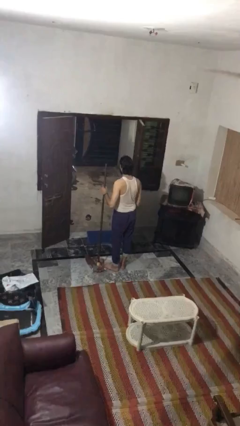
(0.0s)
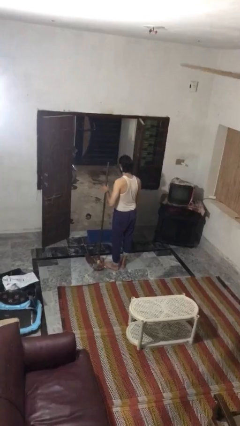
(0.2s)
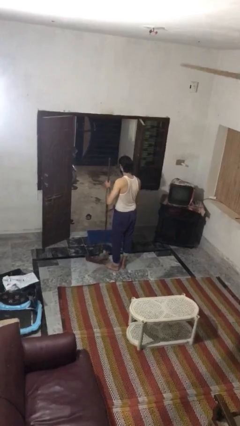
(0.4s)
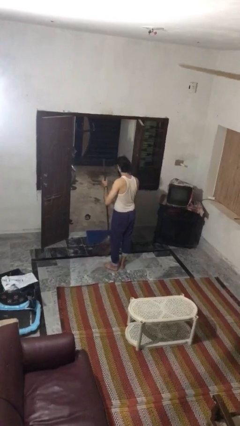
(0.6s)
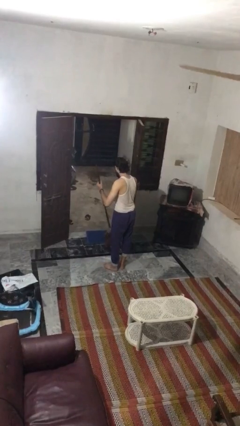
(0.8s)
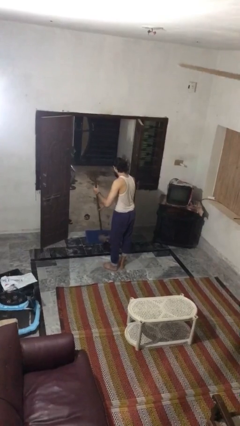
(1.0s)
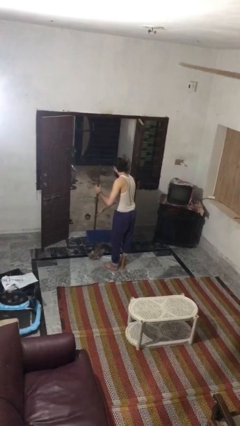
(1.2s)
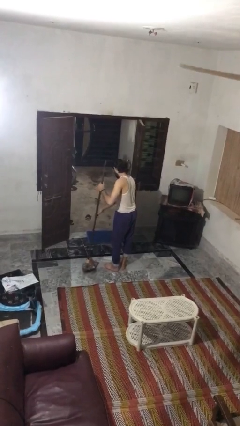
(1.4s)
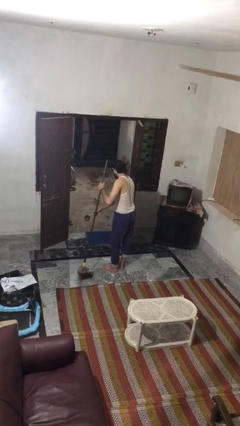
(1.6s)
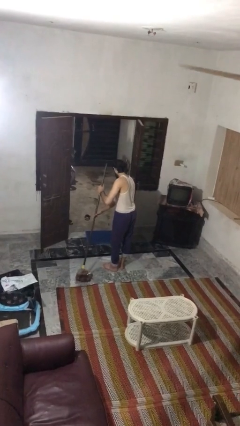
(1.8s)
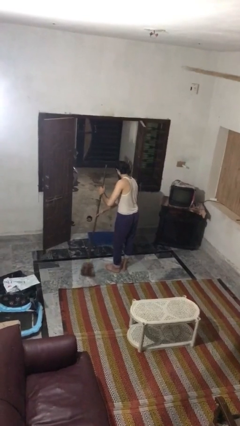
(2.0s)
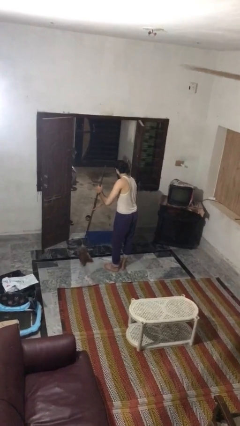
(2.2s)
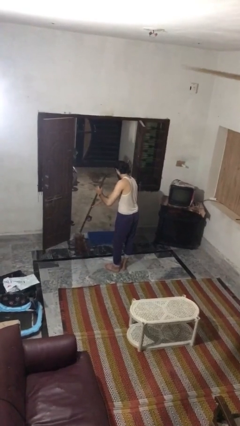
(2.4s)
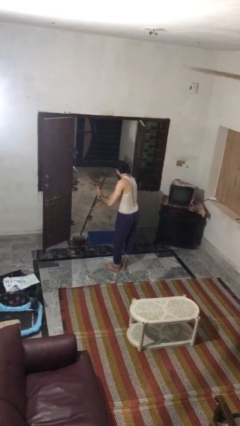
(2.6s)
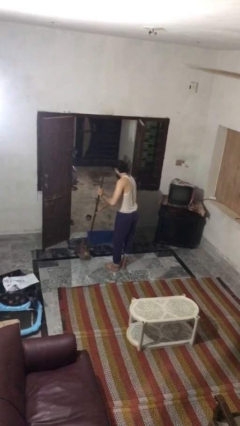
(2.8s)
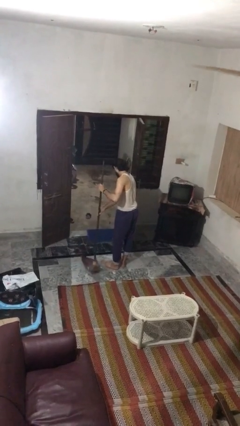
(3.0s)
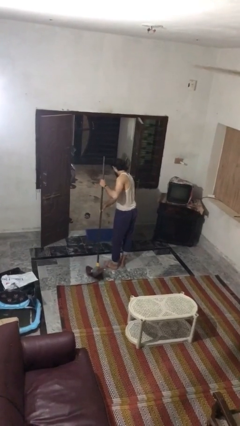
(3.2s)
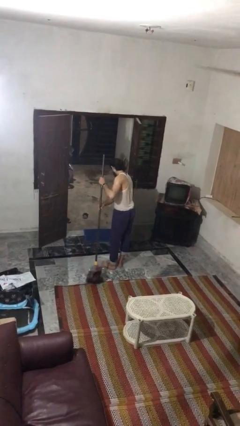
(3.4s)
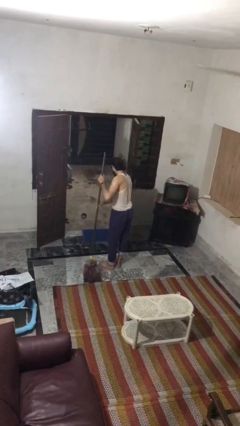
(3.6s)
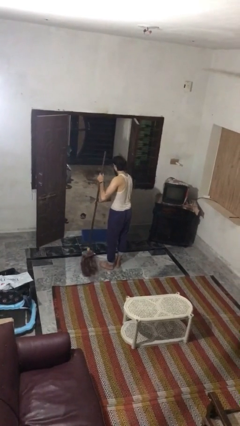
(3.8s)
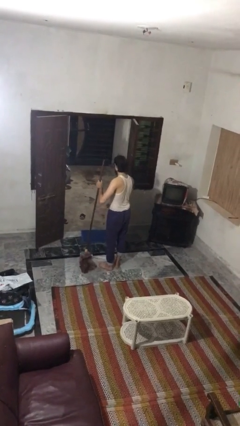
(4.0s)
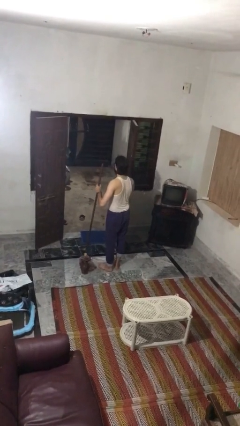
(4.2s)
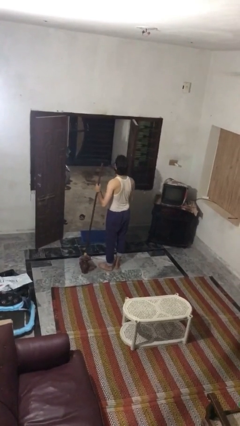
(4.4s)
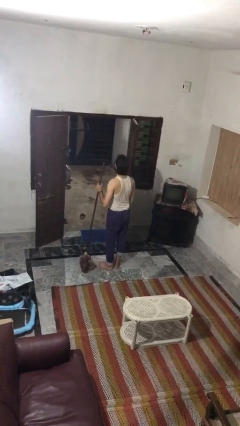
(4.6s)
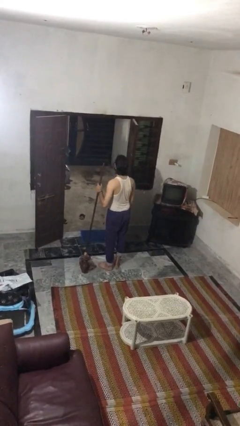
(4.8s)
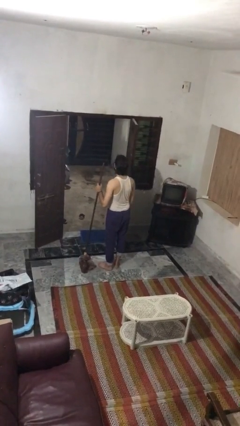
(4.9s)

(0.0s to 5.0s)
person mops

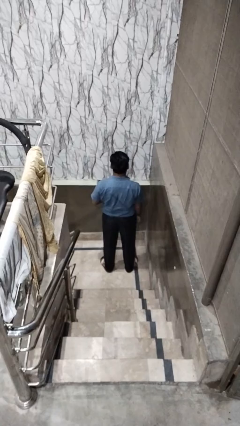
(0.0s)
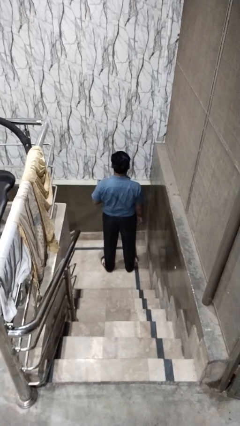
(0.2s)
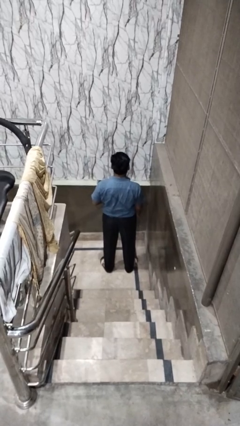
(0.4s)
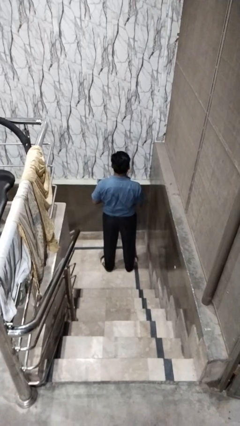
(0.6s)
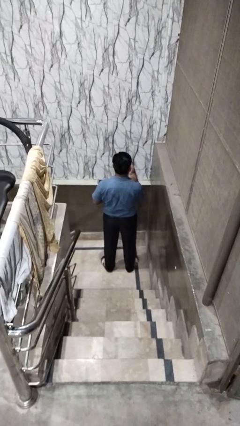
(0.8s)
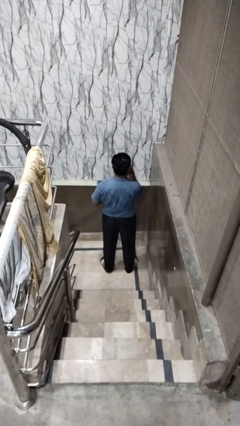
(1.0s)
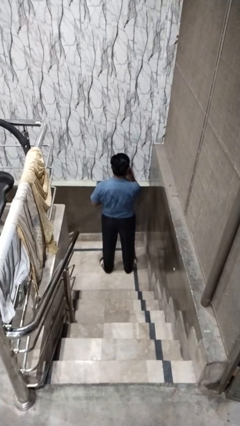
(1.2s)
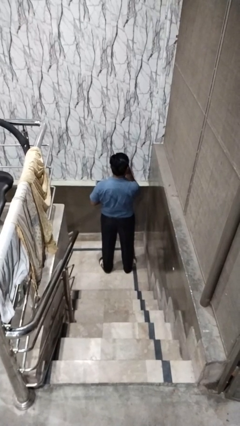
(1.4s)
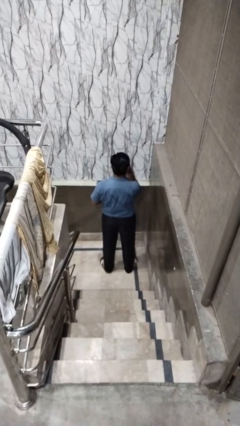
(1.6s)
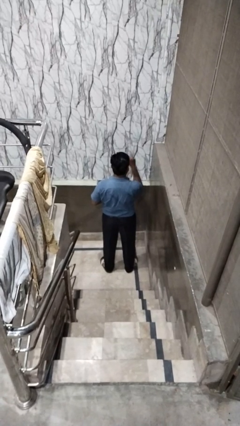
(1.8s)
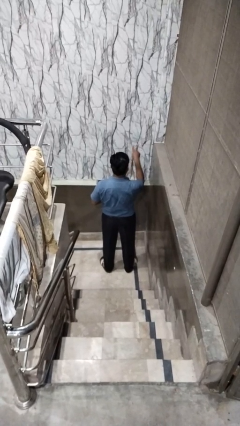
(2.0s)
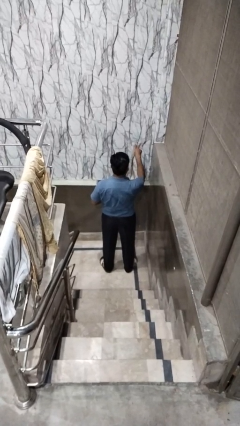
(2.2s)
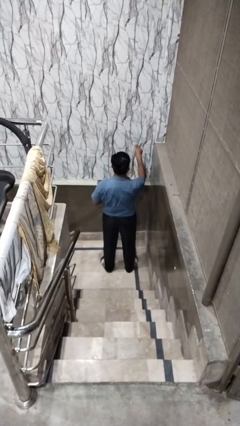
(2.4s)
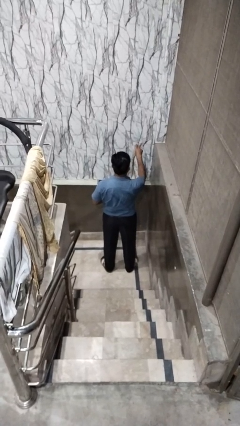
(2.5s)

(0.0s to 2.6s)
person gestures watch closely

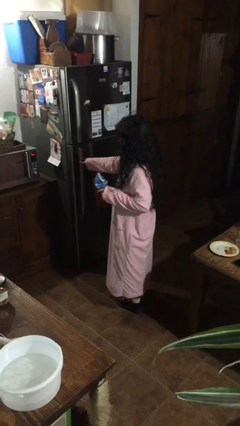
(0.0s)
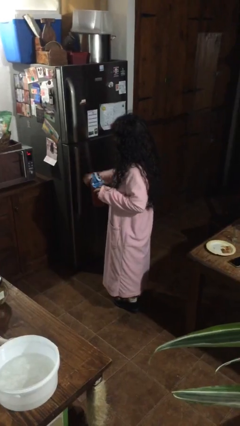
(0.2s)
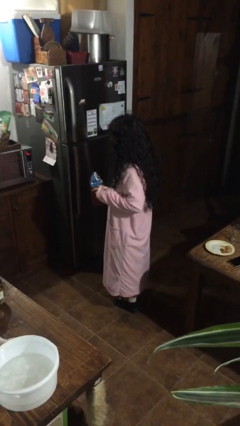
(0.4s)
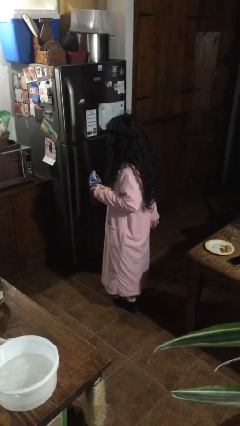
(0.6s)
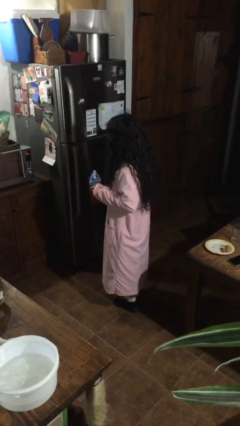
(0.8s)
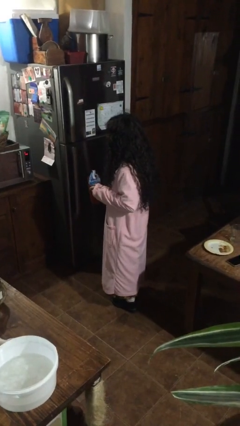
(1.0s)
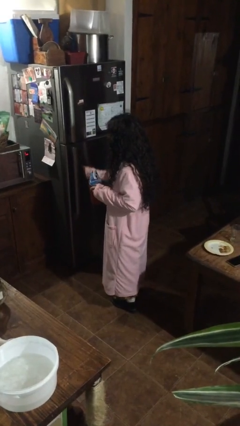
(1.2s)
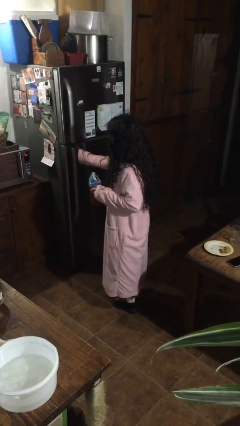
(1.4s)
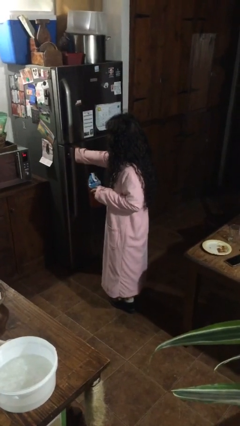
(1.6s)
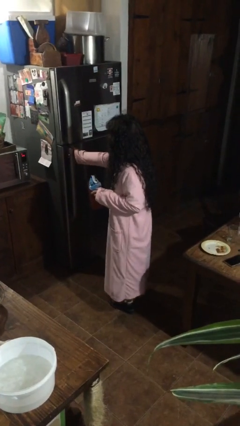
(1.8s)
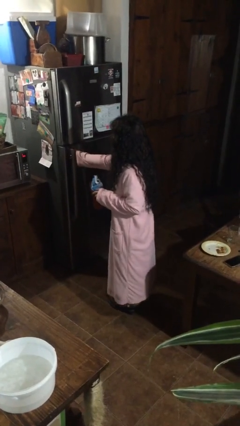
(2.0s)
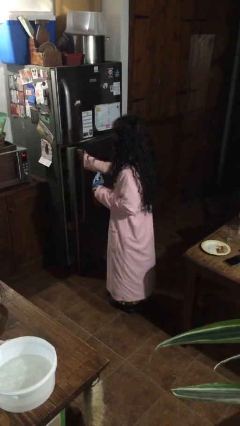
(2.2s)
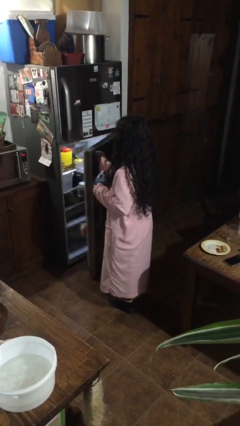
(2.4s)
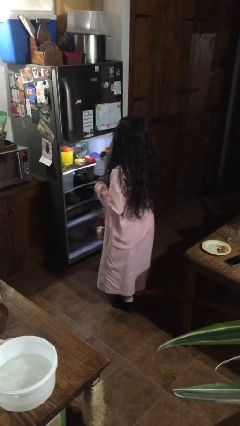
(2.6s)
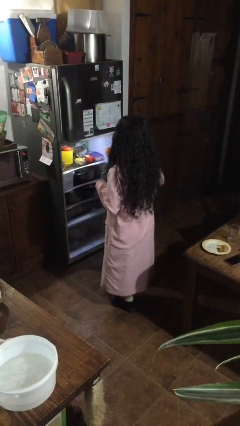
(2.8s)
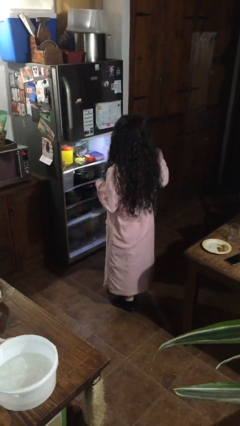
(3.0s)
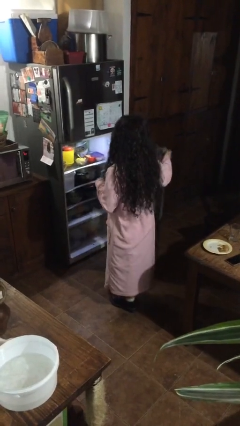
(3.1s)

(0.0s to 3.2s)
person opens refrigerator

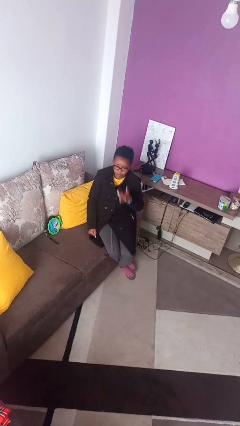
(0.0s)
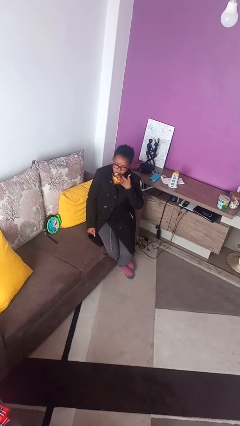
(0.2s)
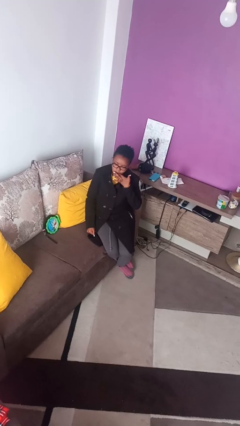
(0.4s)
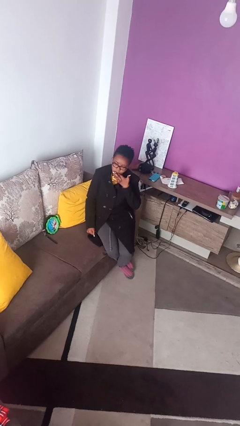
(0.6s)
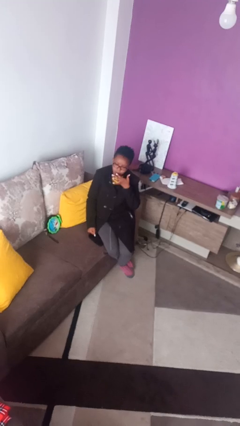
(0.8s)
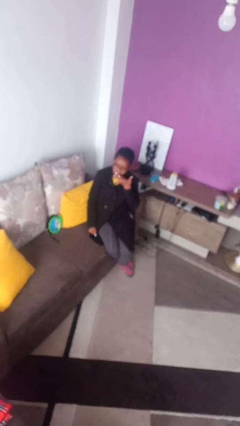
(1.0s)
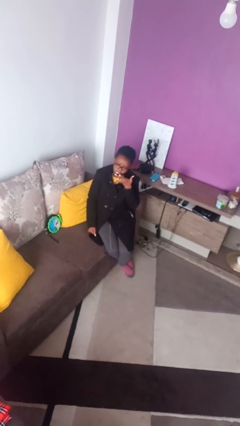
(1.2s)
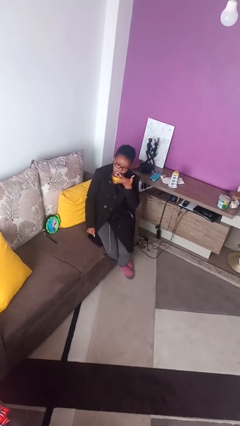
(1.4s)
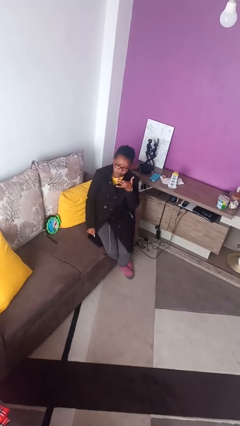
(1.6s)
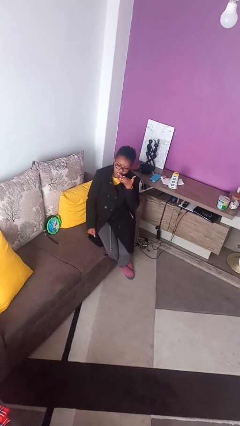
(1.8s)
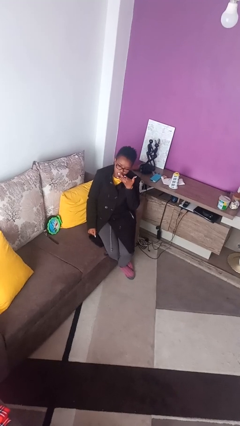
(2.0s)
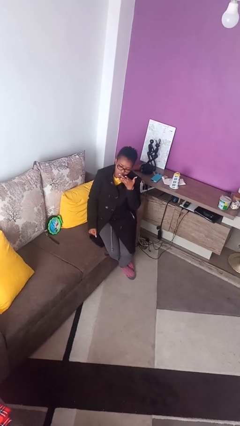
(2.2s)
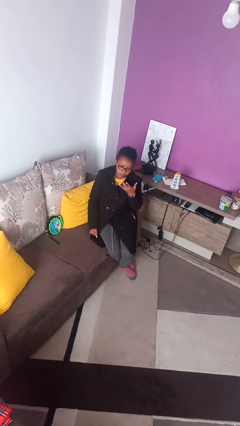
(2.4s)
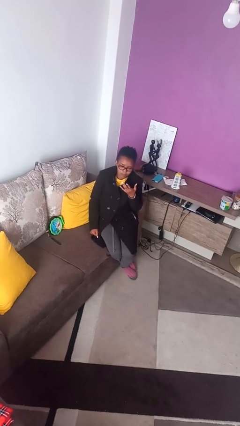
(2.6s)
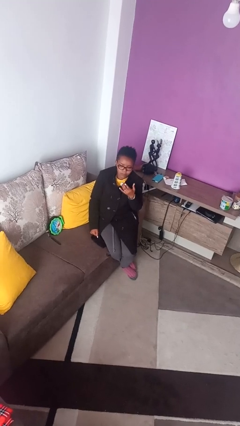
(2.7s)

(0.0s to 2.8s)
person licks fingers

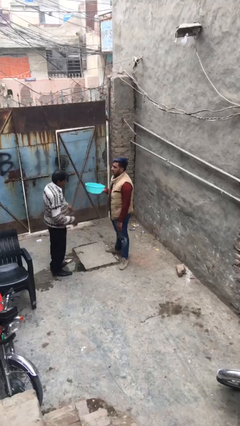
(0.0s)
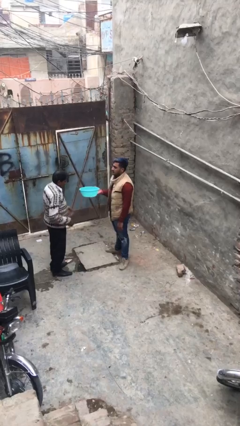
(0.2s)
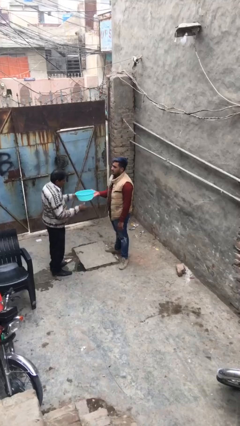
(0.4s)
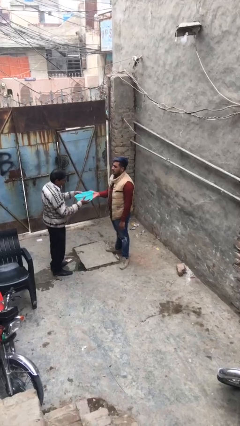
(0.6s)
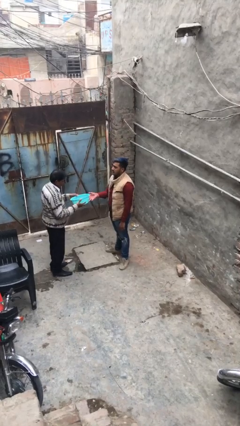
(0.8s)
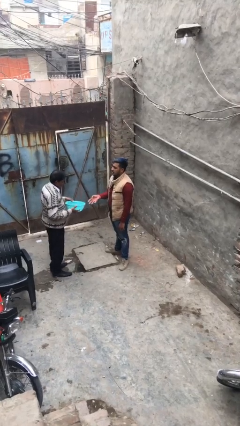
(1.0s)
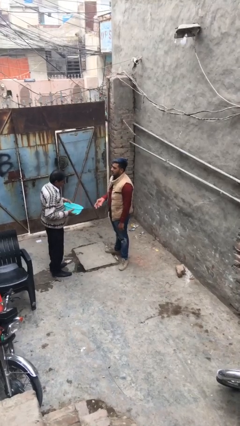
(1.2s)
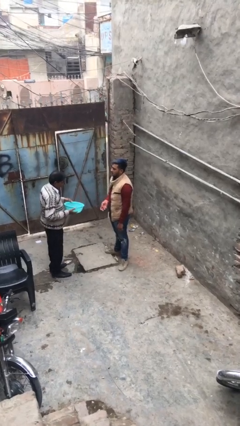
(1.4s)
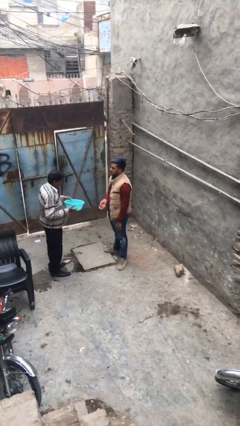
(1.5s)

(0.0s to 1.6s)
person transfers object to person

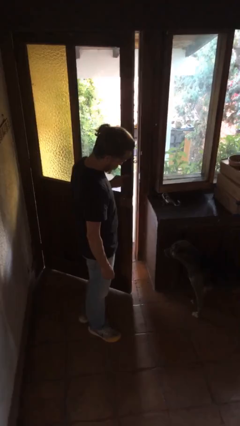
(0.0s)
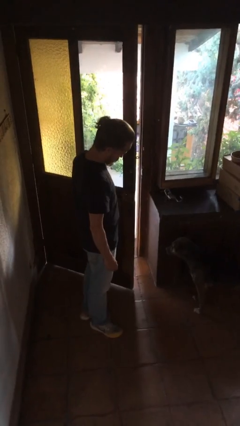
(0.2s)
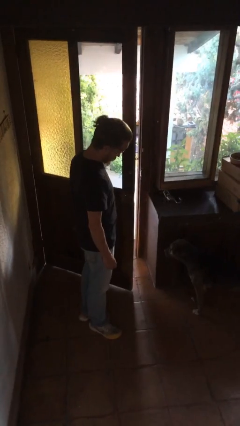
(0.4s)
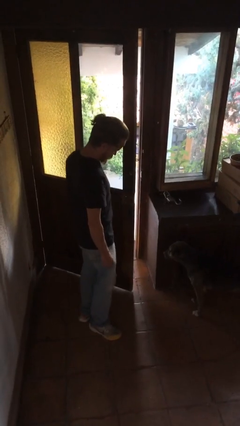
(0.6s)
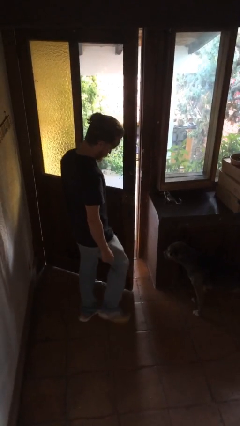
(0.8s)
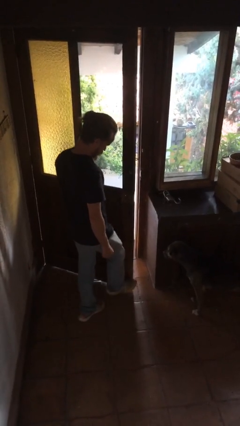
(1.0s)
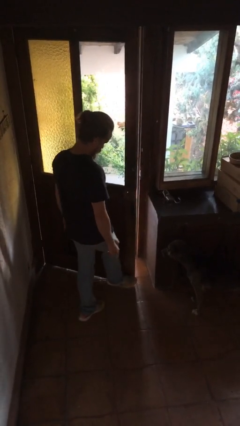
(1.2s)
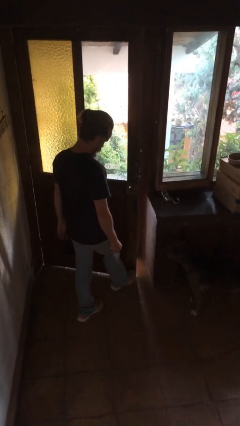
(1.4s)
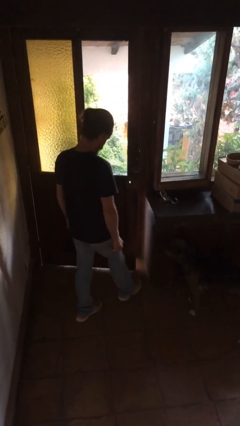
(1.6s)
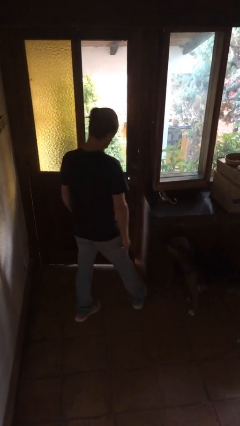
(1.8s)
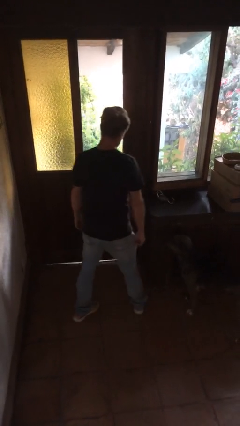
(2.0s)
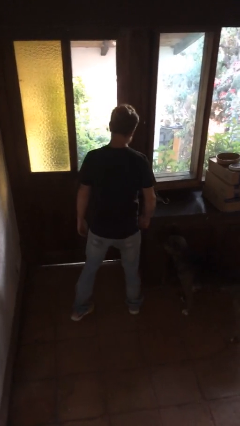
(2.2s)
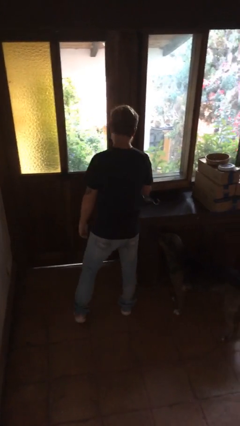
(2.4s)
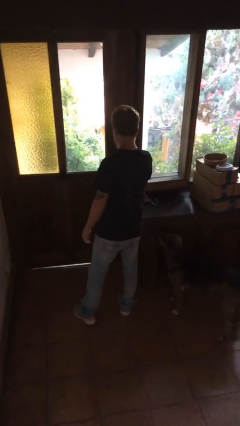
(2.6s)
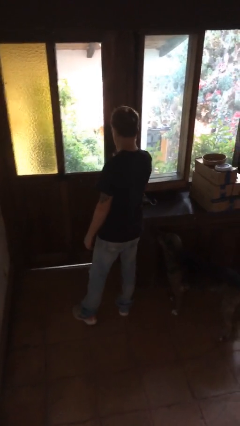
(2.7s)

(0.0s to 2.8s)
person closes door with foot
